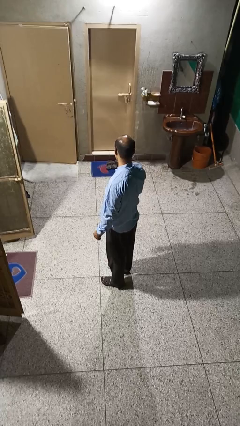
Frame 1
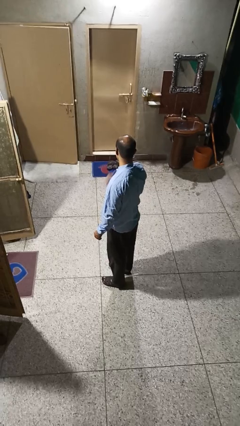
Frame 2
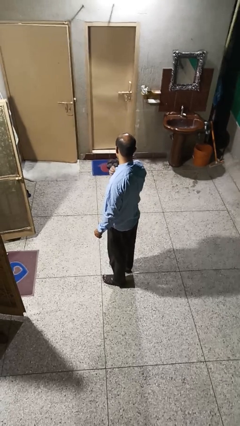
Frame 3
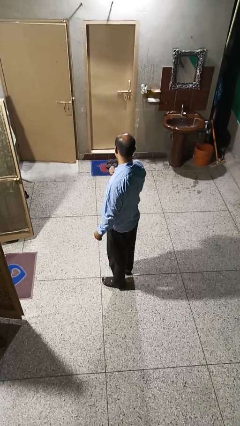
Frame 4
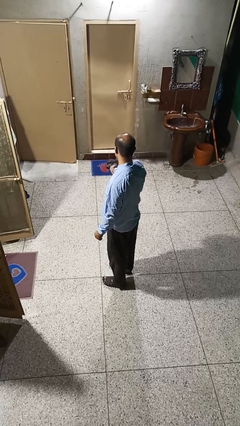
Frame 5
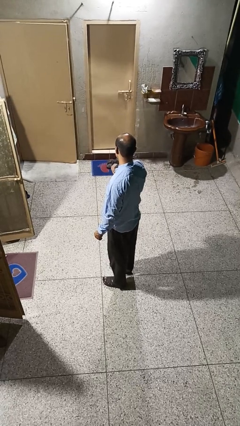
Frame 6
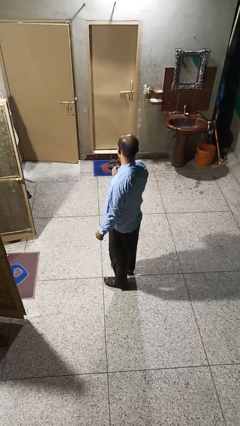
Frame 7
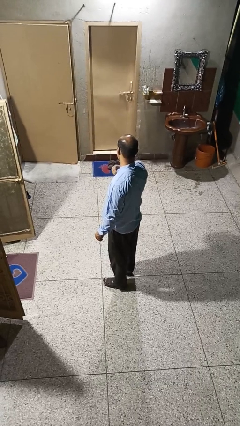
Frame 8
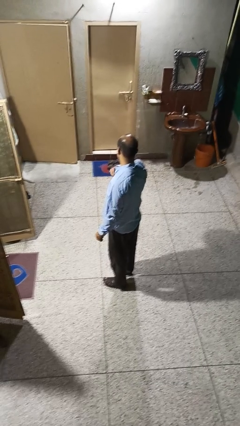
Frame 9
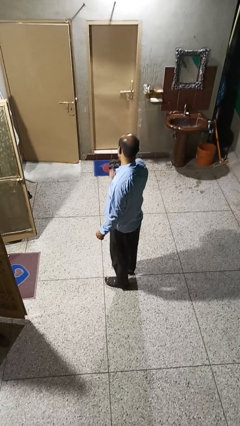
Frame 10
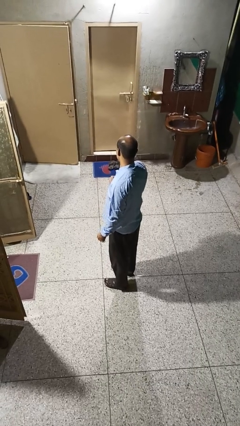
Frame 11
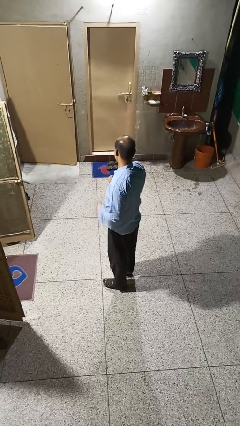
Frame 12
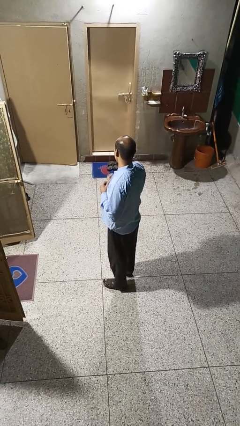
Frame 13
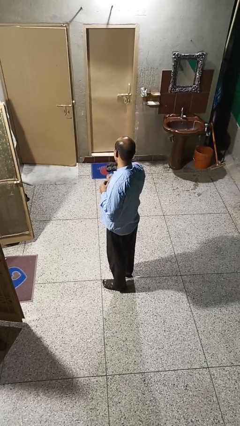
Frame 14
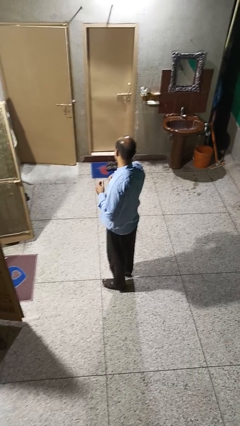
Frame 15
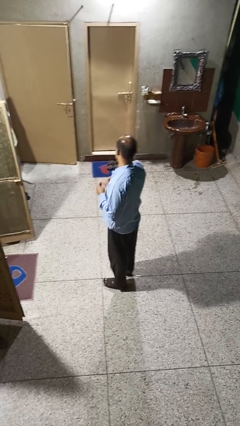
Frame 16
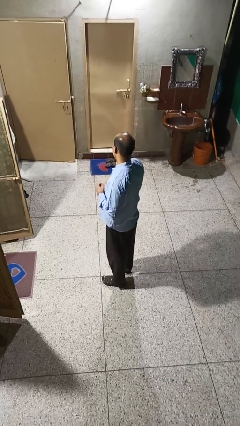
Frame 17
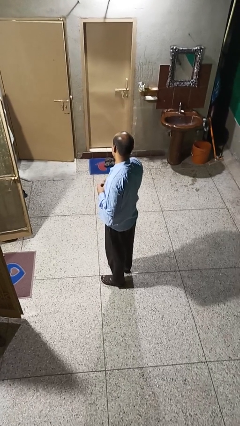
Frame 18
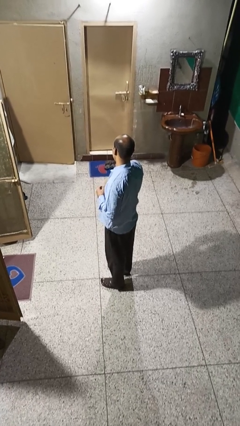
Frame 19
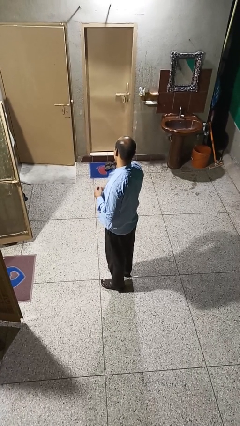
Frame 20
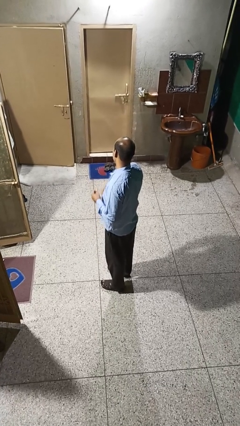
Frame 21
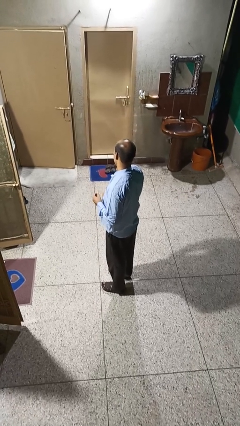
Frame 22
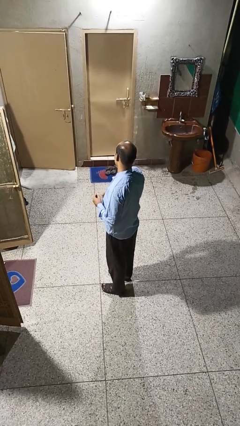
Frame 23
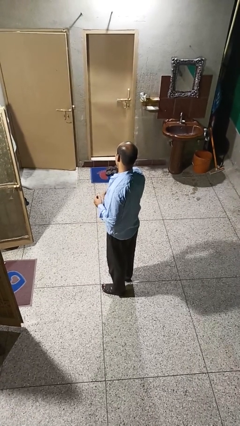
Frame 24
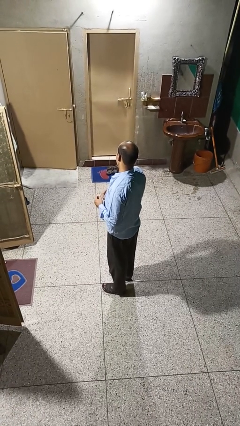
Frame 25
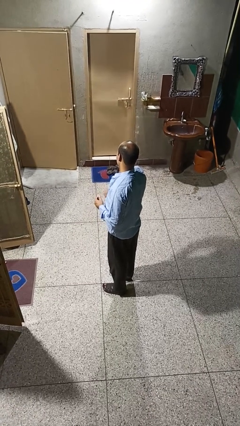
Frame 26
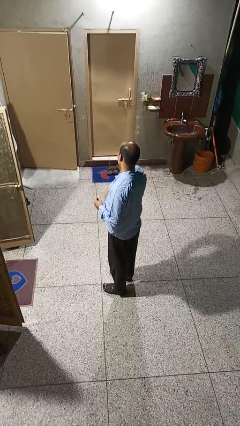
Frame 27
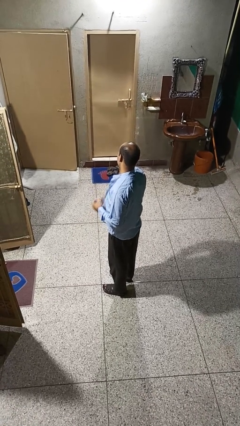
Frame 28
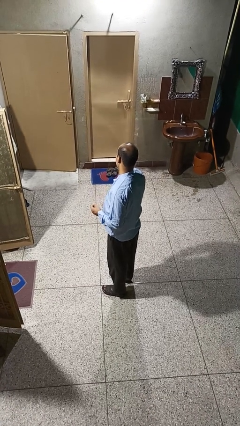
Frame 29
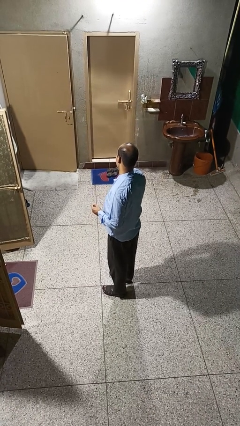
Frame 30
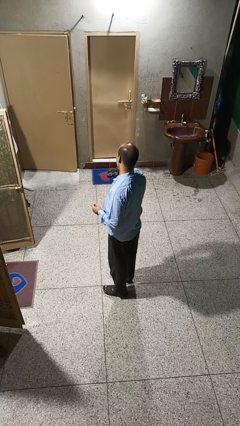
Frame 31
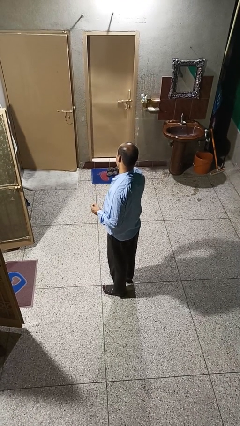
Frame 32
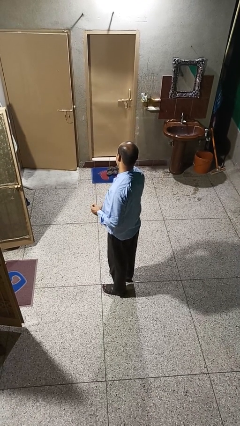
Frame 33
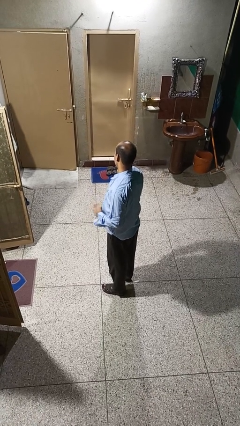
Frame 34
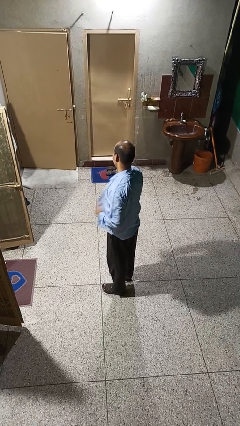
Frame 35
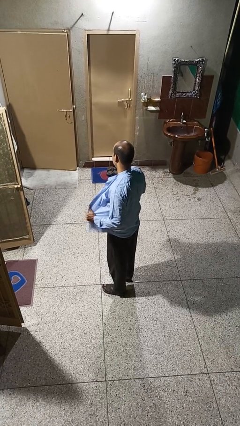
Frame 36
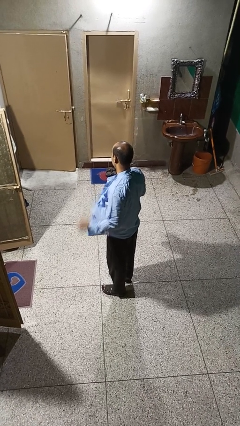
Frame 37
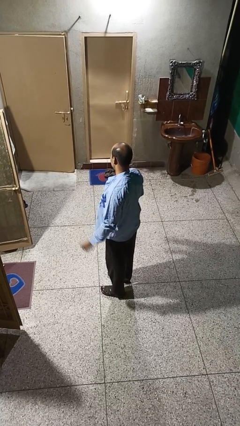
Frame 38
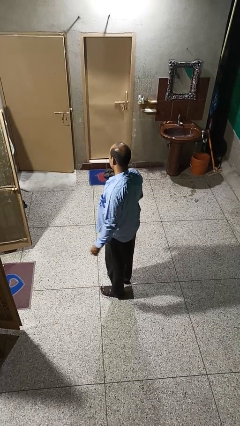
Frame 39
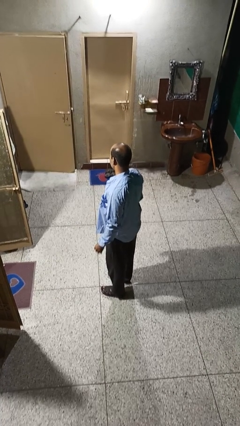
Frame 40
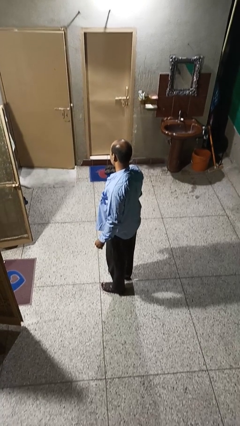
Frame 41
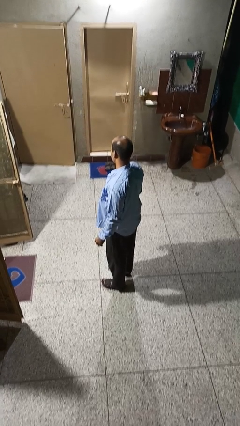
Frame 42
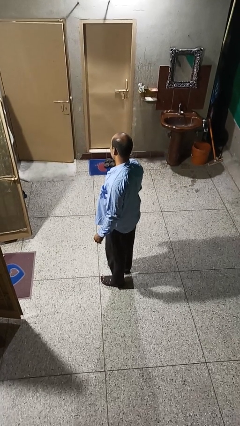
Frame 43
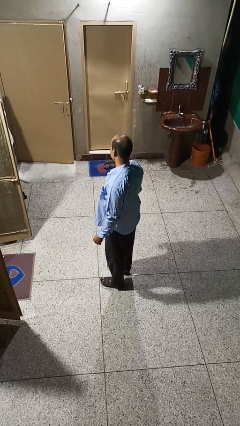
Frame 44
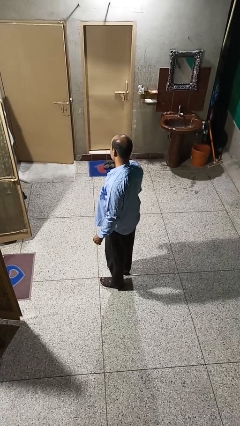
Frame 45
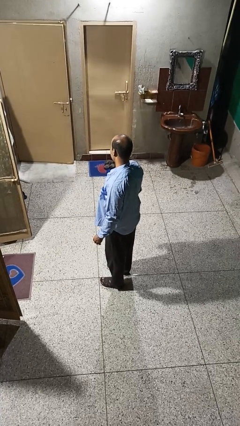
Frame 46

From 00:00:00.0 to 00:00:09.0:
person unbuttons shirt

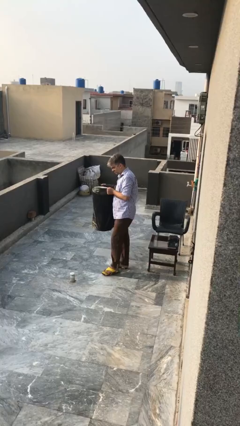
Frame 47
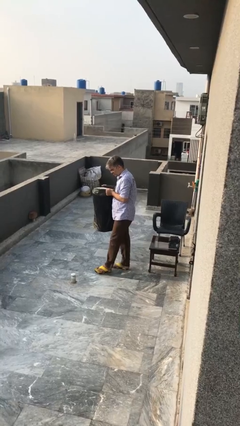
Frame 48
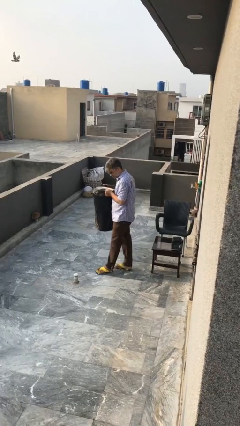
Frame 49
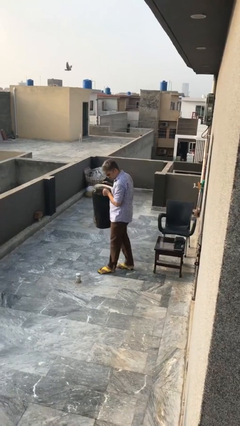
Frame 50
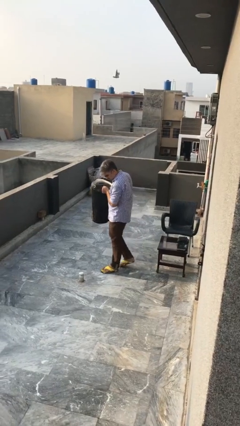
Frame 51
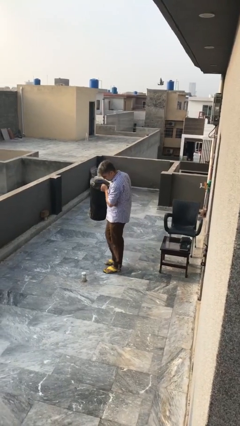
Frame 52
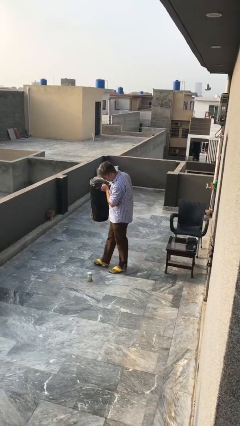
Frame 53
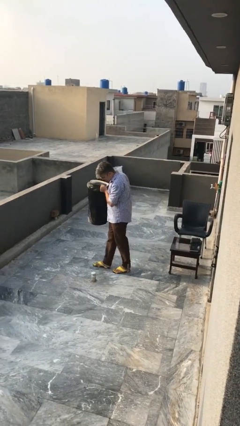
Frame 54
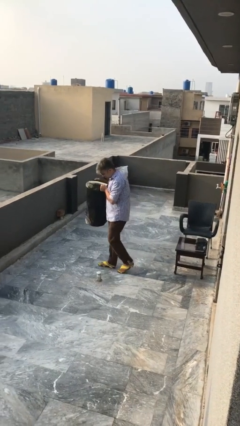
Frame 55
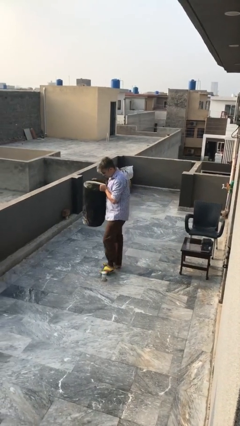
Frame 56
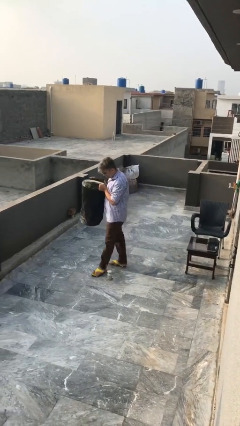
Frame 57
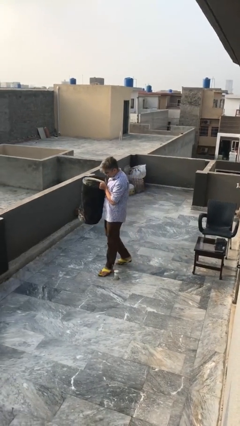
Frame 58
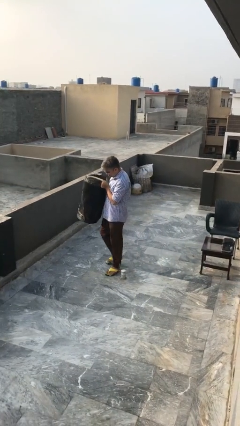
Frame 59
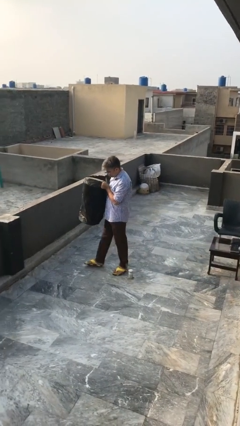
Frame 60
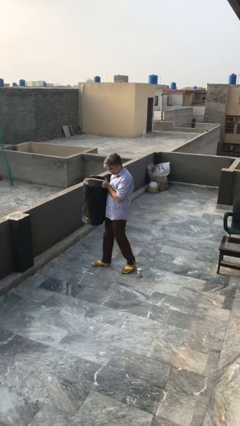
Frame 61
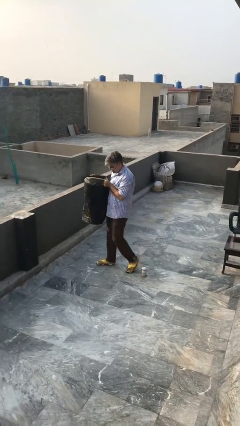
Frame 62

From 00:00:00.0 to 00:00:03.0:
person carries heavy object

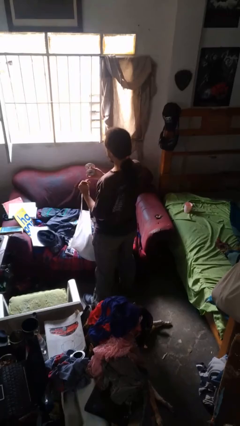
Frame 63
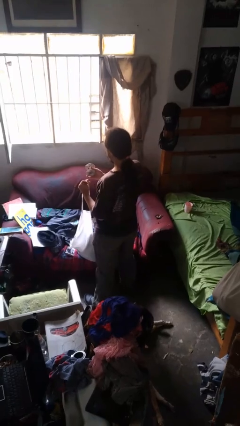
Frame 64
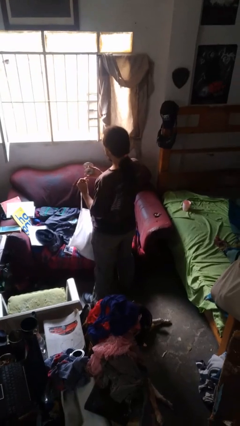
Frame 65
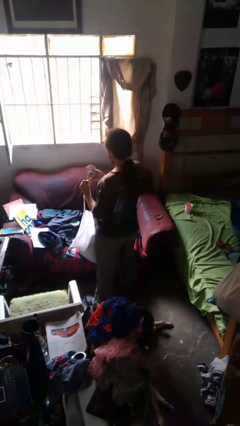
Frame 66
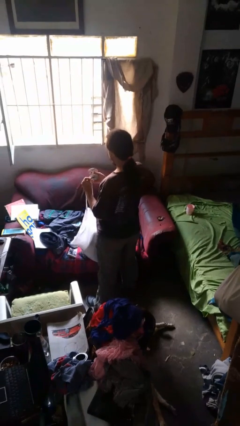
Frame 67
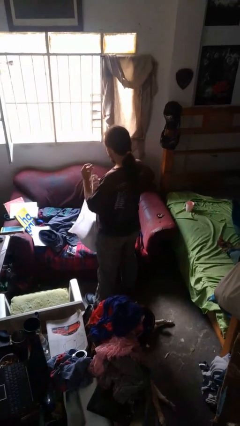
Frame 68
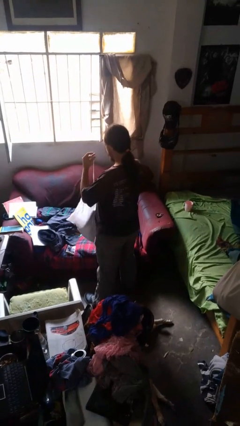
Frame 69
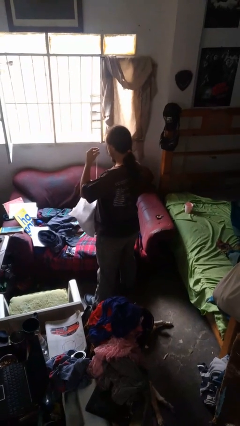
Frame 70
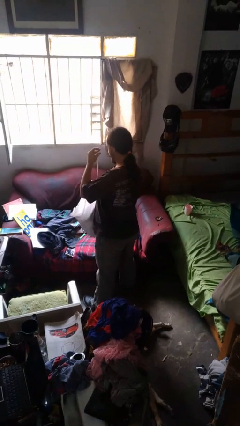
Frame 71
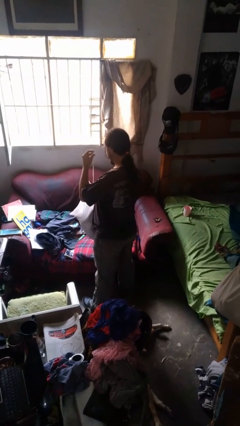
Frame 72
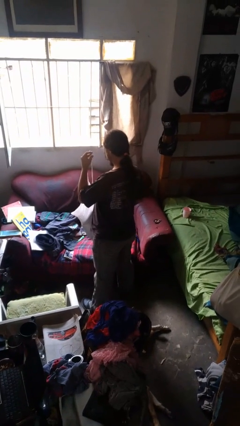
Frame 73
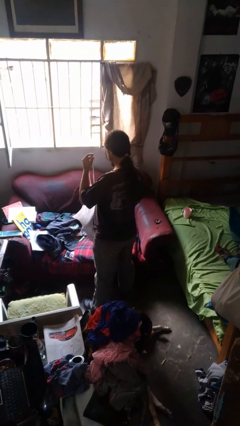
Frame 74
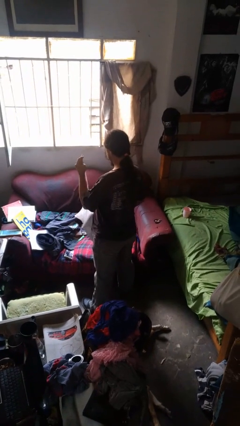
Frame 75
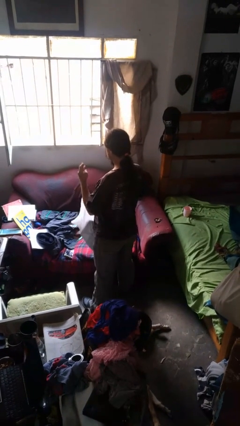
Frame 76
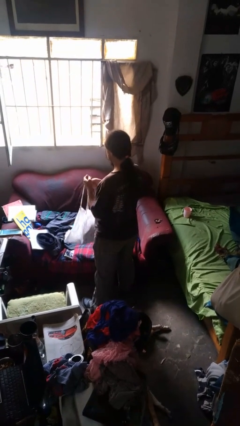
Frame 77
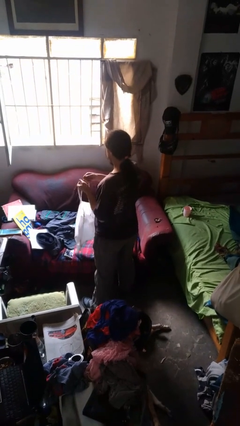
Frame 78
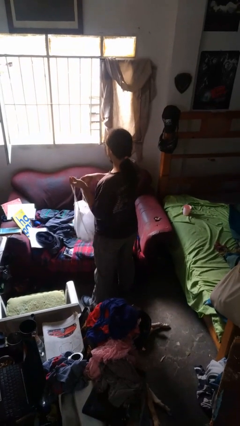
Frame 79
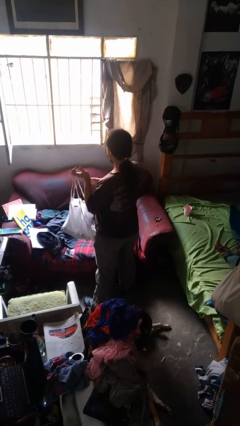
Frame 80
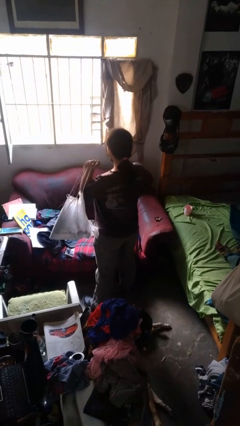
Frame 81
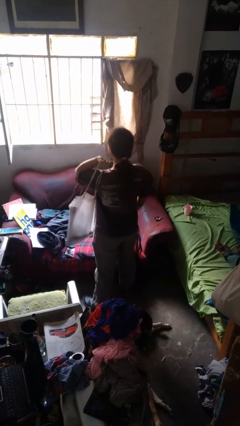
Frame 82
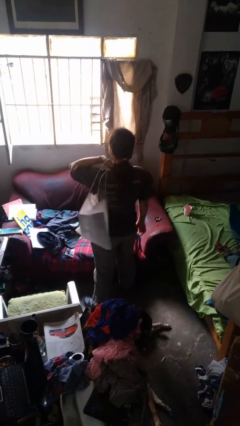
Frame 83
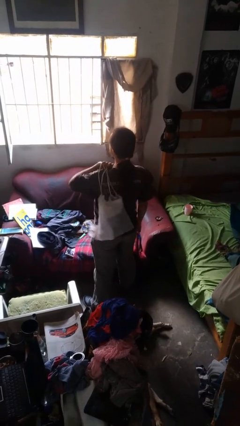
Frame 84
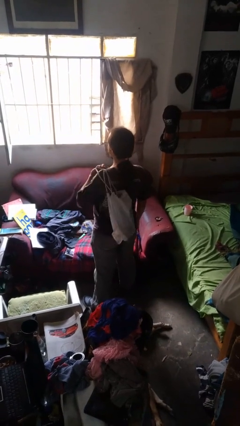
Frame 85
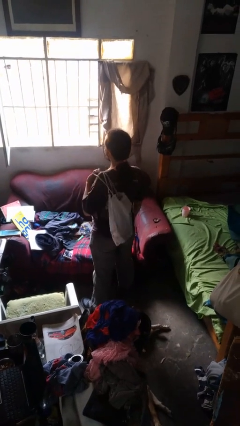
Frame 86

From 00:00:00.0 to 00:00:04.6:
person puts object into bag

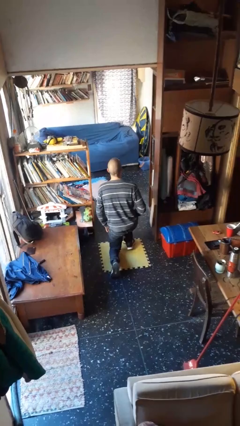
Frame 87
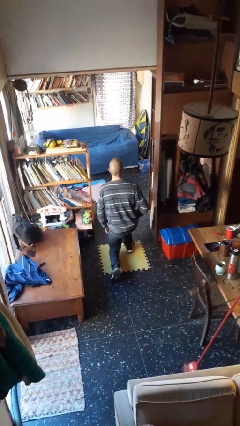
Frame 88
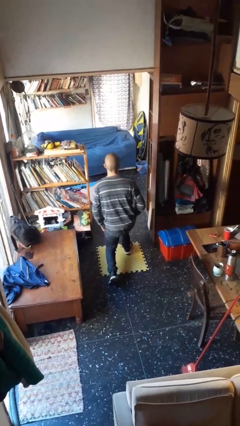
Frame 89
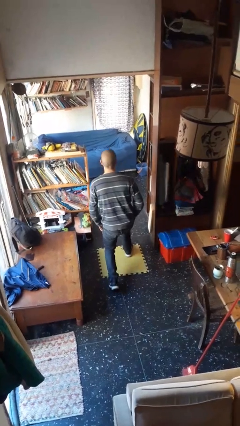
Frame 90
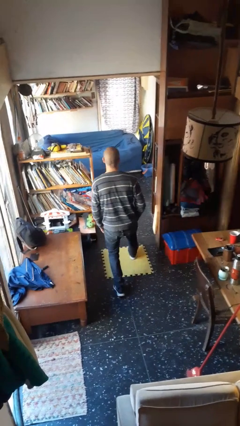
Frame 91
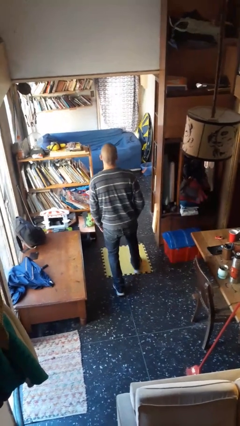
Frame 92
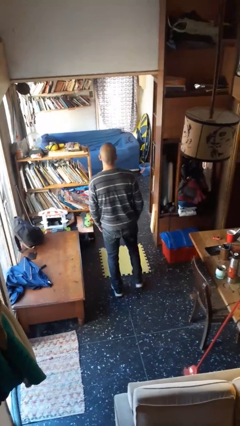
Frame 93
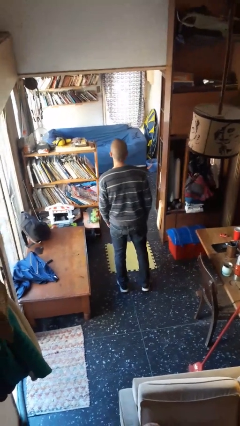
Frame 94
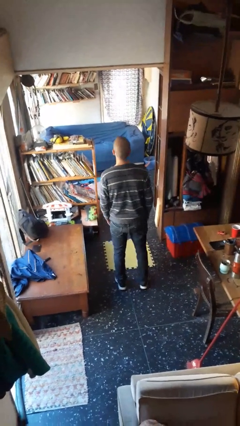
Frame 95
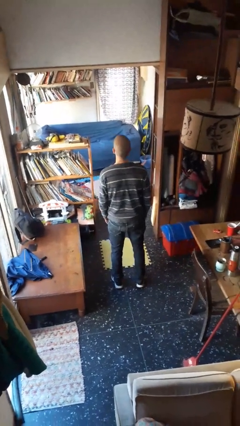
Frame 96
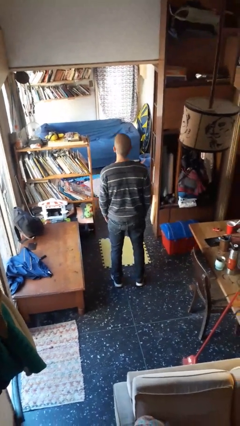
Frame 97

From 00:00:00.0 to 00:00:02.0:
person stands up from floor
